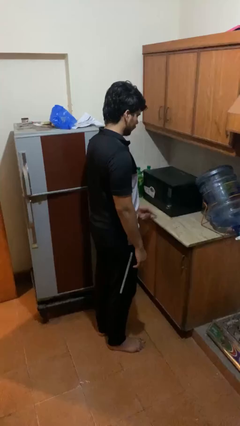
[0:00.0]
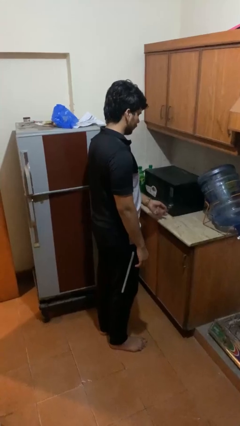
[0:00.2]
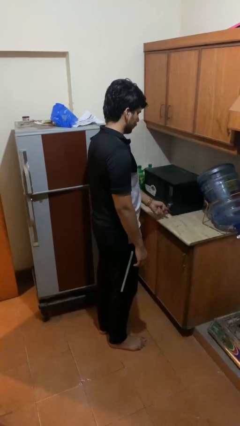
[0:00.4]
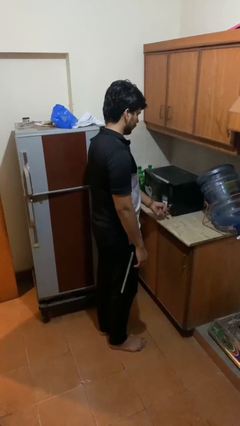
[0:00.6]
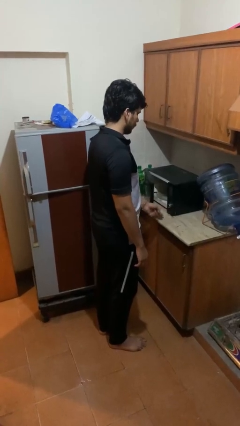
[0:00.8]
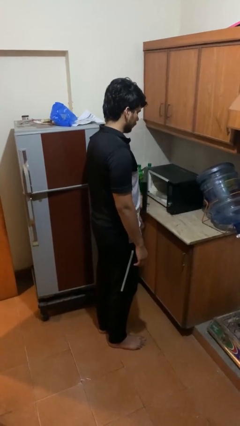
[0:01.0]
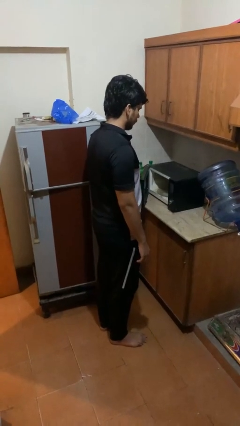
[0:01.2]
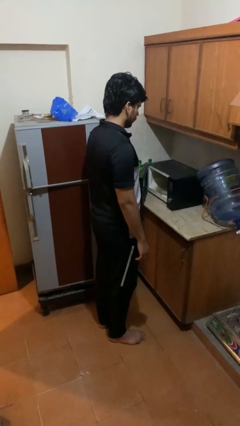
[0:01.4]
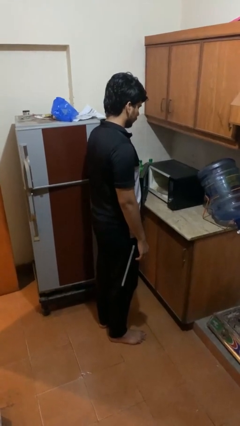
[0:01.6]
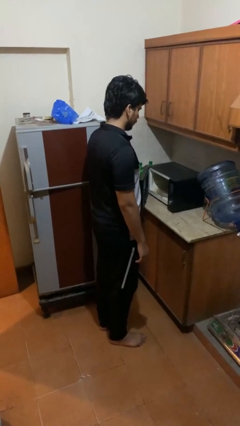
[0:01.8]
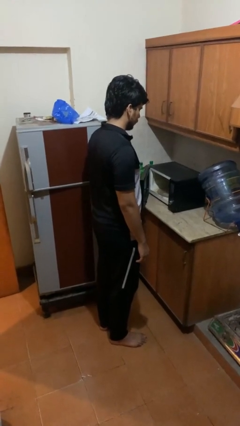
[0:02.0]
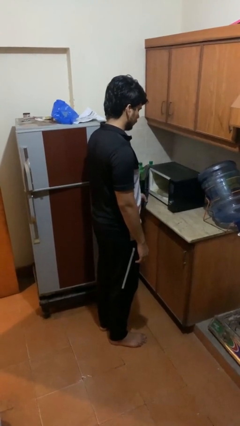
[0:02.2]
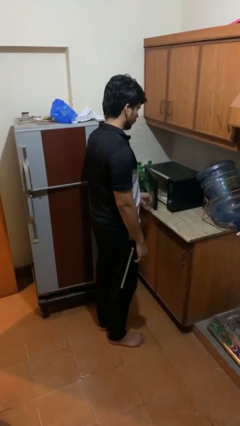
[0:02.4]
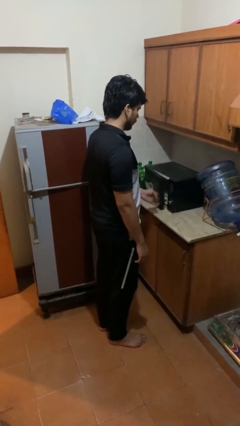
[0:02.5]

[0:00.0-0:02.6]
person opens oven door

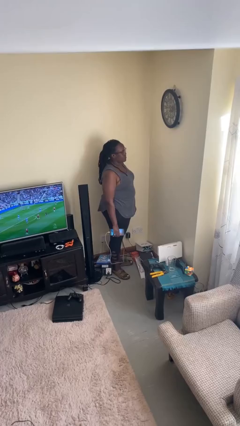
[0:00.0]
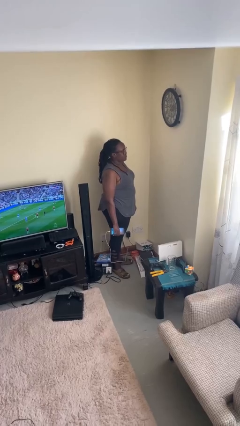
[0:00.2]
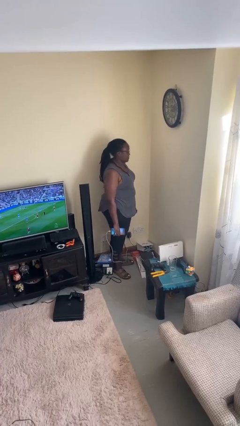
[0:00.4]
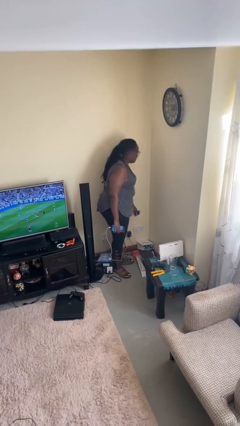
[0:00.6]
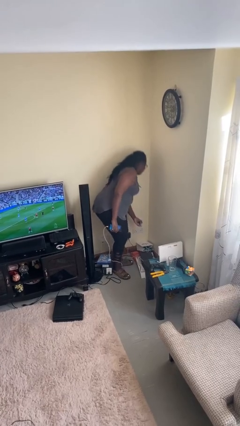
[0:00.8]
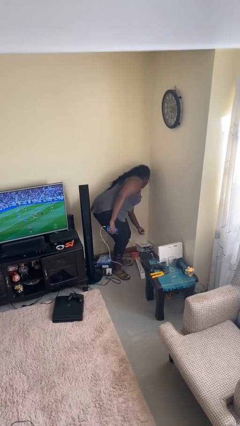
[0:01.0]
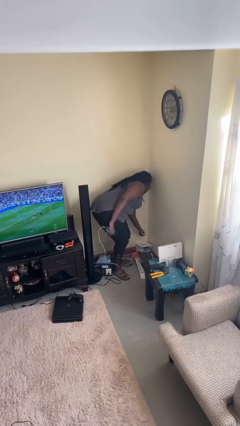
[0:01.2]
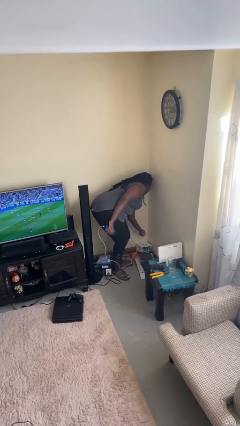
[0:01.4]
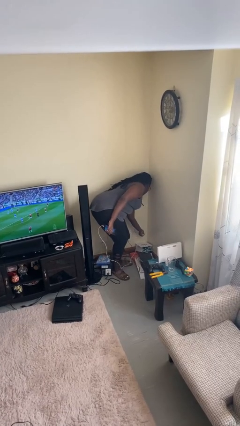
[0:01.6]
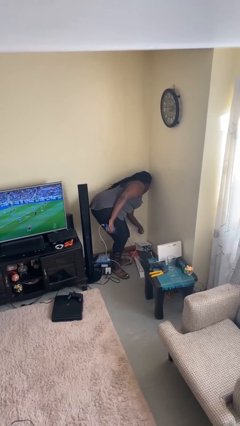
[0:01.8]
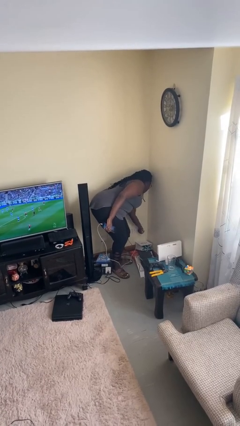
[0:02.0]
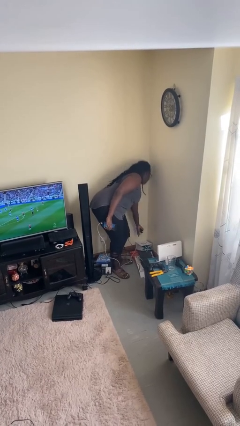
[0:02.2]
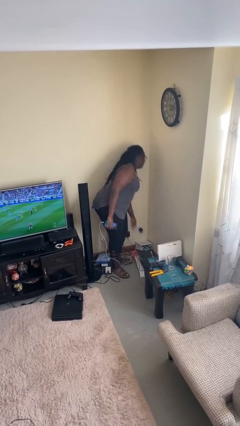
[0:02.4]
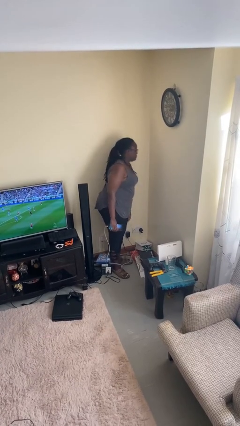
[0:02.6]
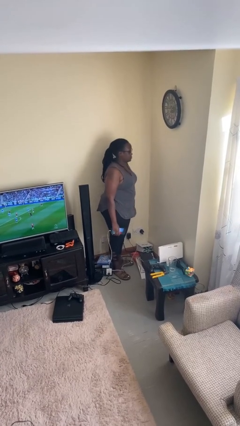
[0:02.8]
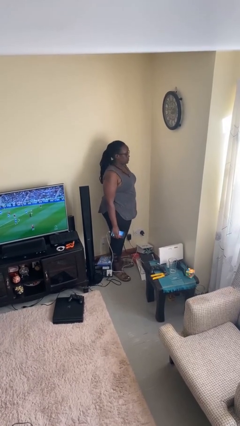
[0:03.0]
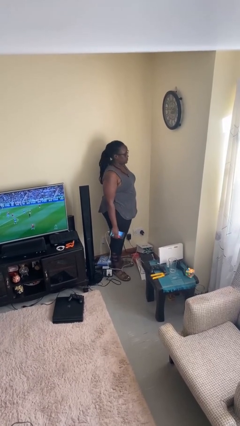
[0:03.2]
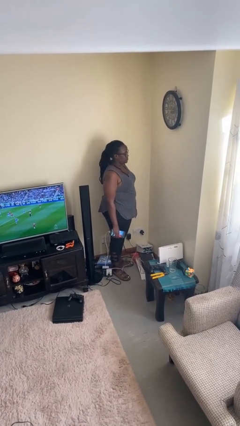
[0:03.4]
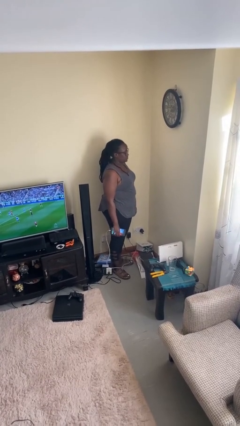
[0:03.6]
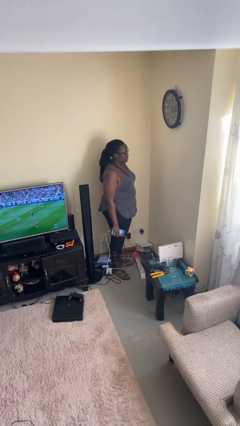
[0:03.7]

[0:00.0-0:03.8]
person plugs into electrical socket

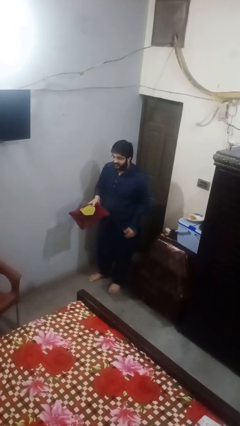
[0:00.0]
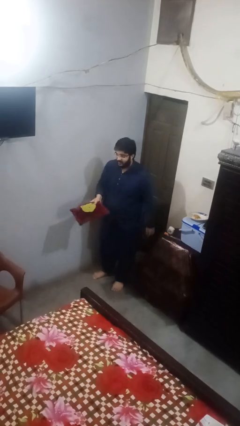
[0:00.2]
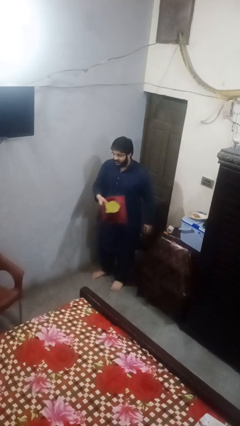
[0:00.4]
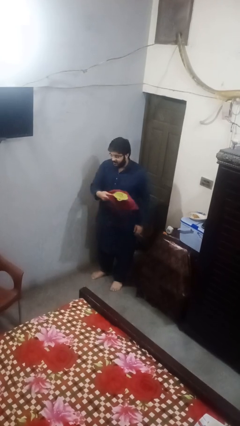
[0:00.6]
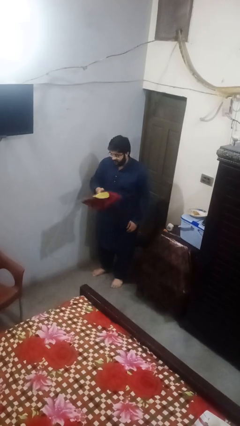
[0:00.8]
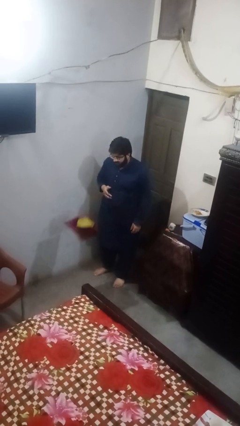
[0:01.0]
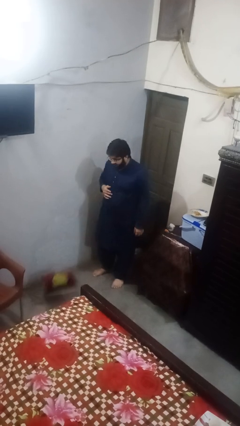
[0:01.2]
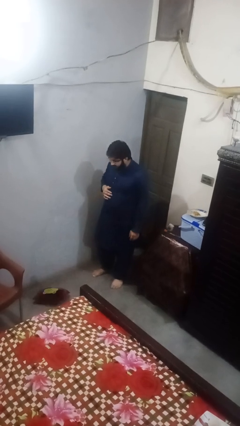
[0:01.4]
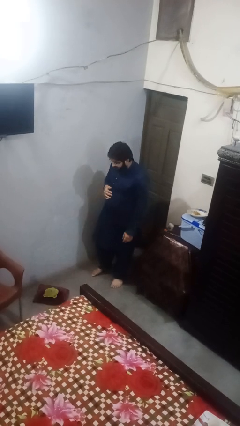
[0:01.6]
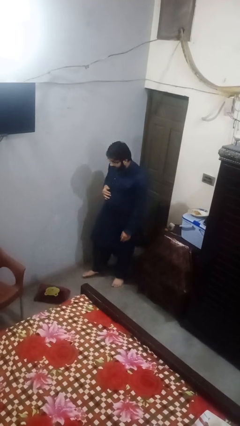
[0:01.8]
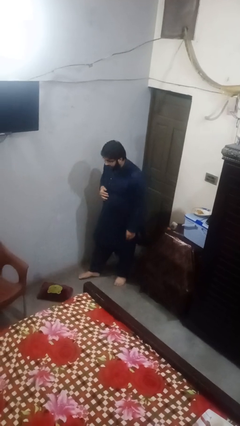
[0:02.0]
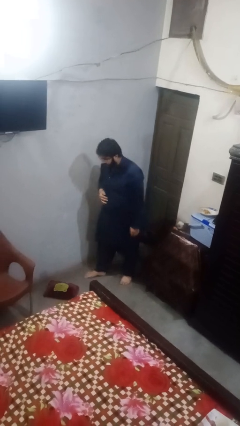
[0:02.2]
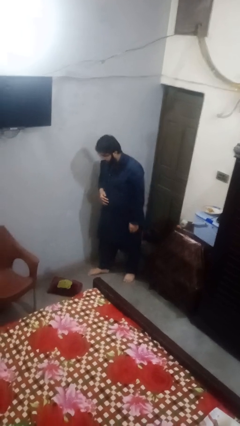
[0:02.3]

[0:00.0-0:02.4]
person throws object to ground

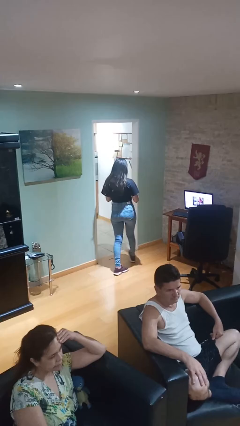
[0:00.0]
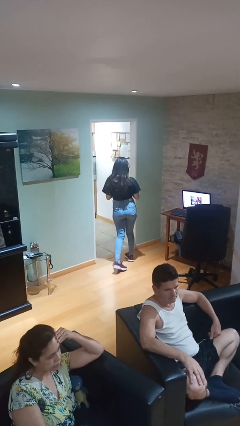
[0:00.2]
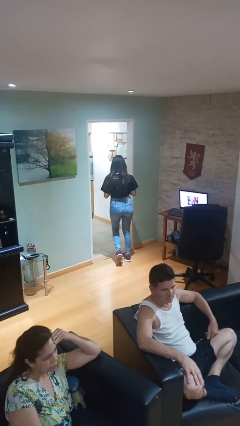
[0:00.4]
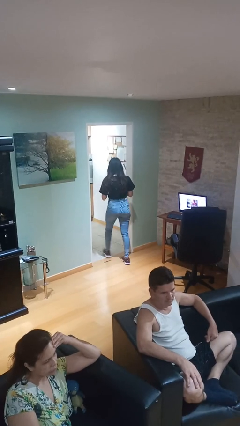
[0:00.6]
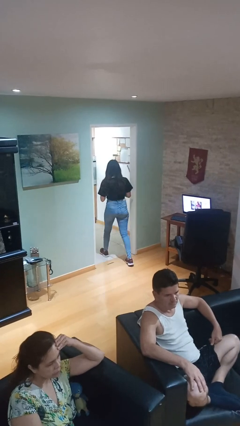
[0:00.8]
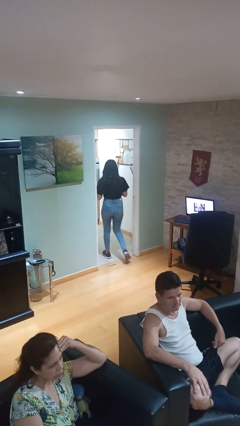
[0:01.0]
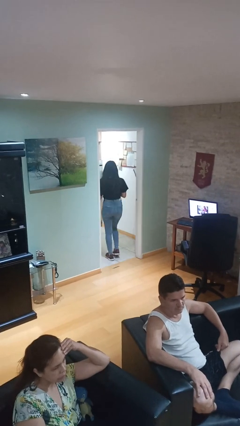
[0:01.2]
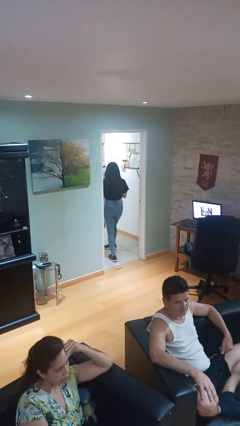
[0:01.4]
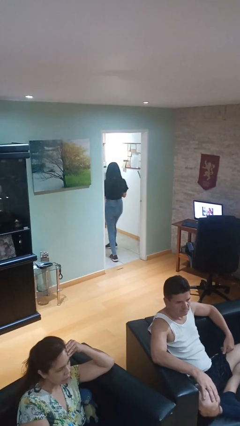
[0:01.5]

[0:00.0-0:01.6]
person exits scene through structure

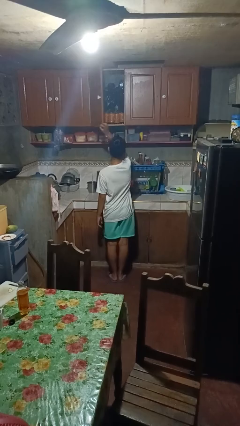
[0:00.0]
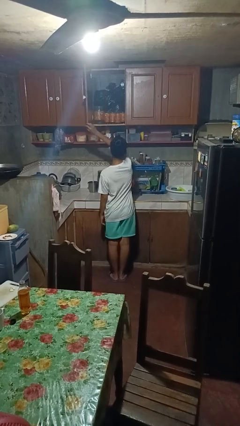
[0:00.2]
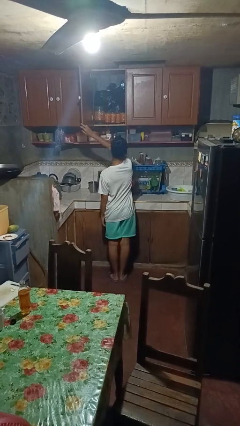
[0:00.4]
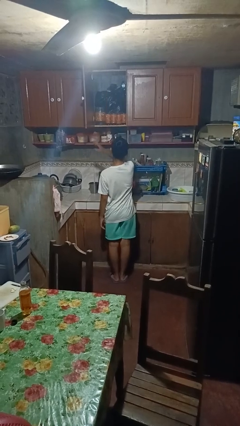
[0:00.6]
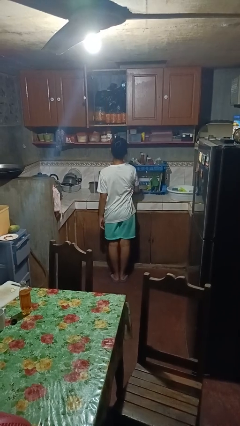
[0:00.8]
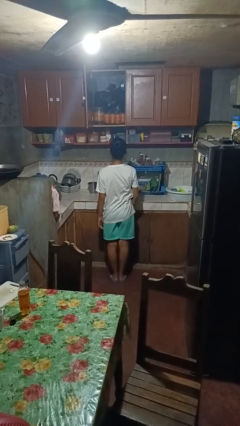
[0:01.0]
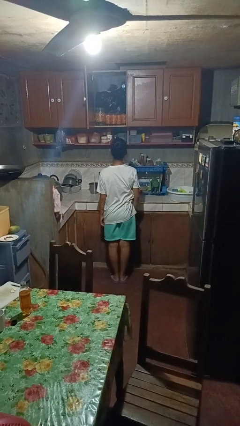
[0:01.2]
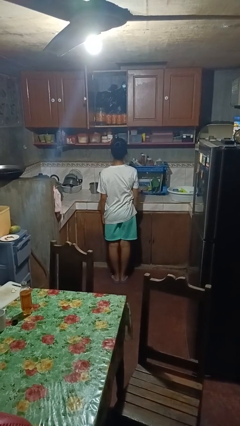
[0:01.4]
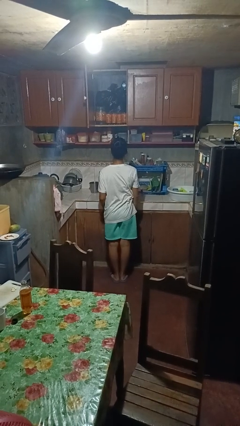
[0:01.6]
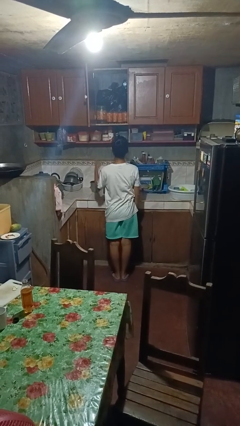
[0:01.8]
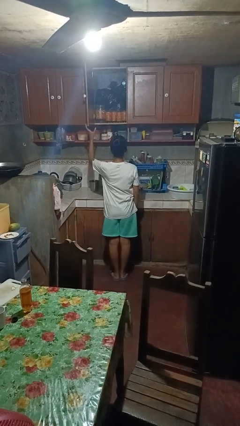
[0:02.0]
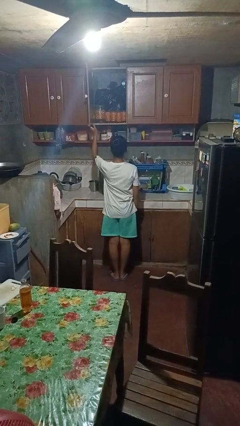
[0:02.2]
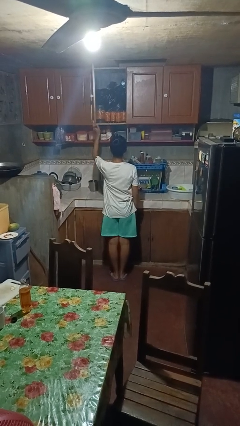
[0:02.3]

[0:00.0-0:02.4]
person opens cabinet

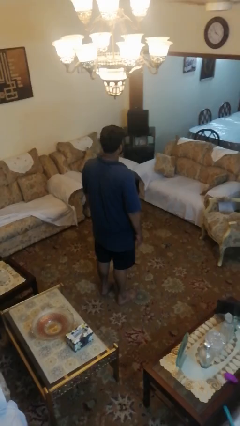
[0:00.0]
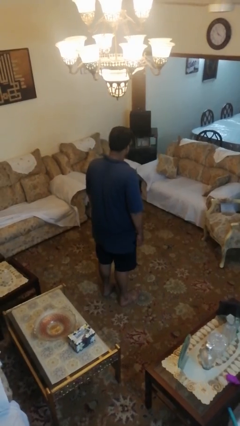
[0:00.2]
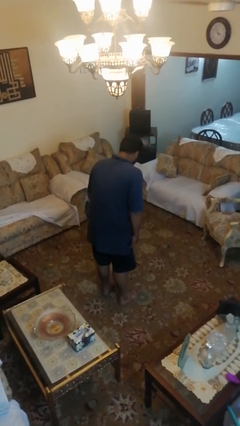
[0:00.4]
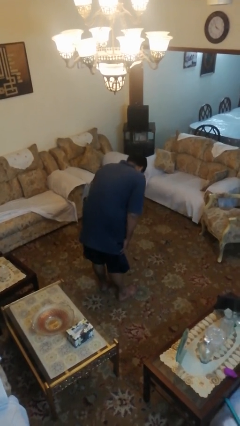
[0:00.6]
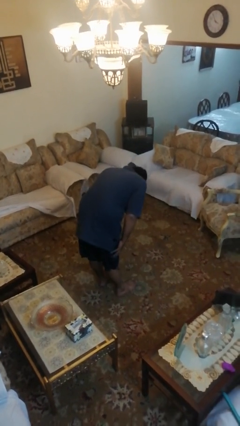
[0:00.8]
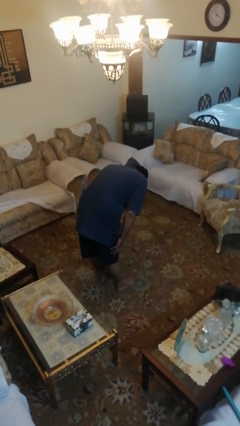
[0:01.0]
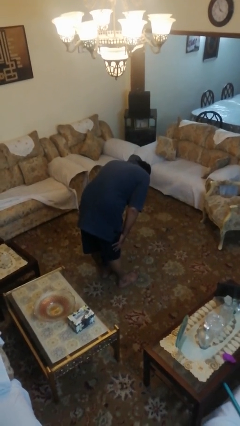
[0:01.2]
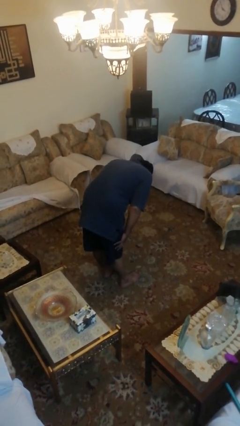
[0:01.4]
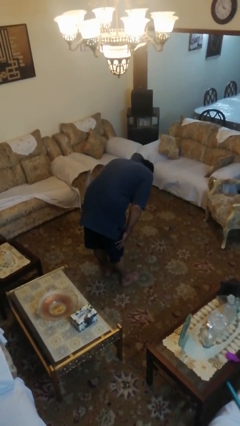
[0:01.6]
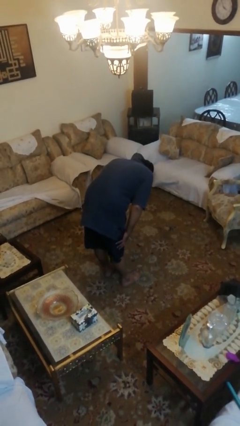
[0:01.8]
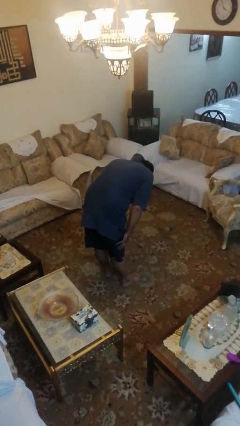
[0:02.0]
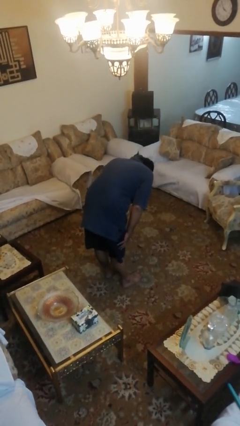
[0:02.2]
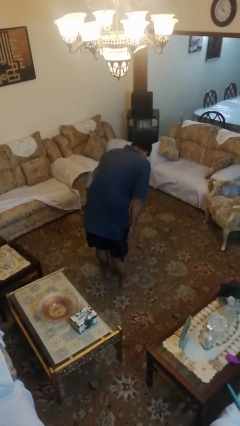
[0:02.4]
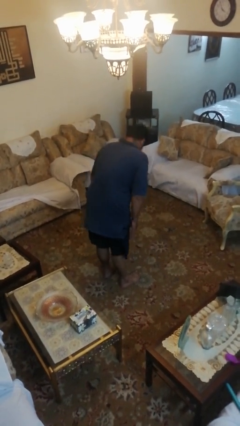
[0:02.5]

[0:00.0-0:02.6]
person bows

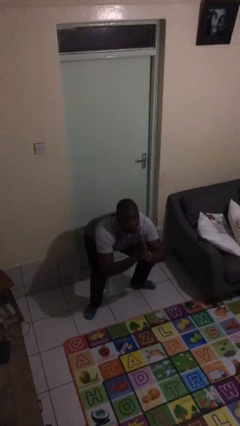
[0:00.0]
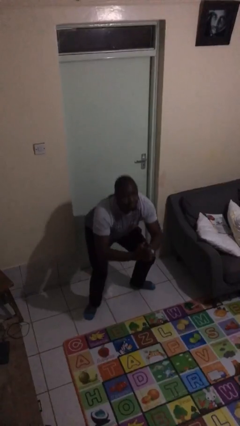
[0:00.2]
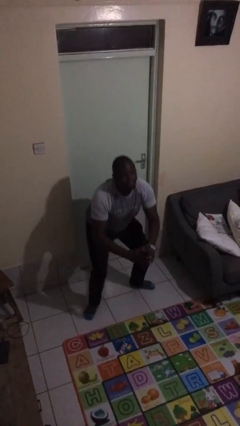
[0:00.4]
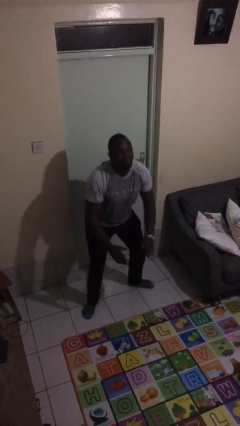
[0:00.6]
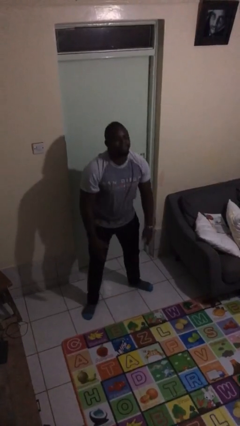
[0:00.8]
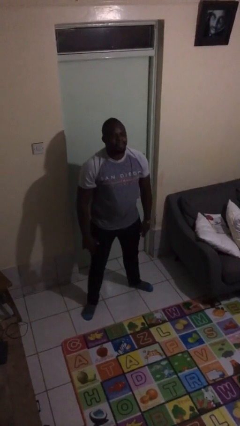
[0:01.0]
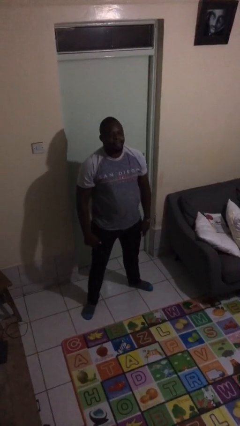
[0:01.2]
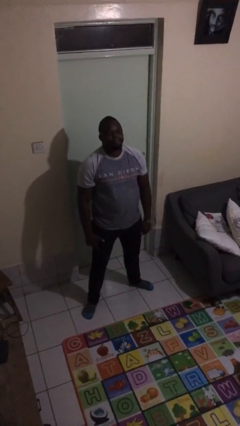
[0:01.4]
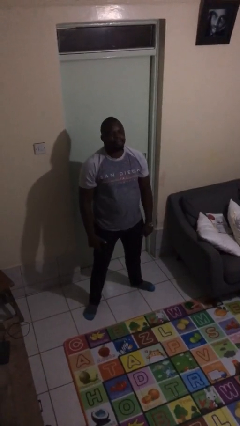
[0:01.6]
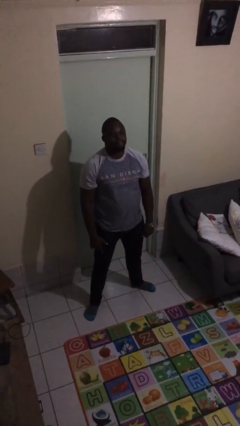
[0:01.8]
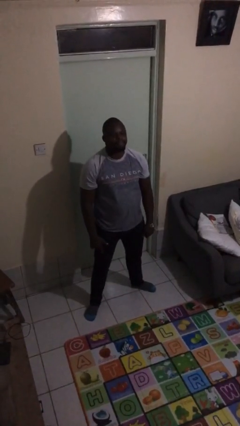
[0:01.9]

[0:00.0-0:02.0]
person stands up
